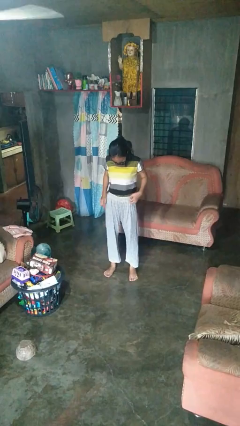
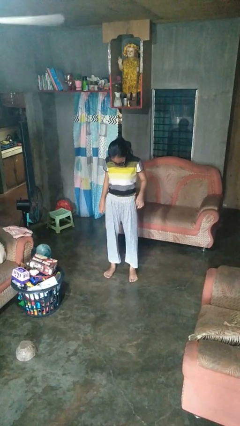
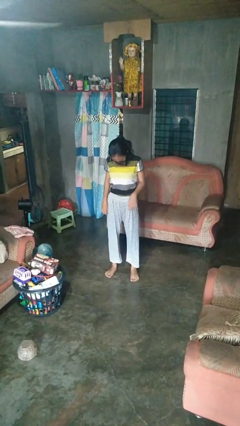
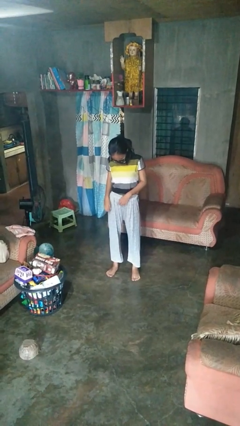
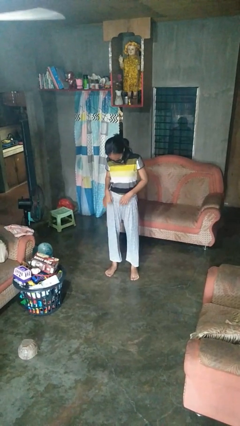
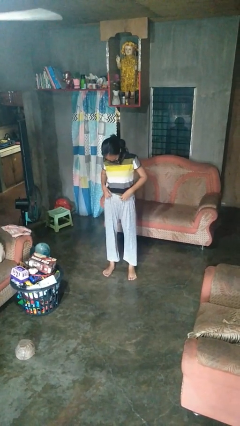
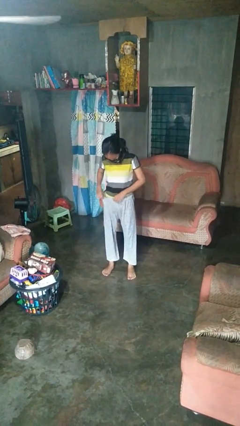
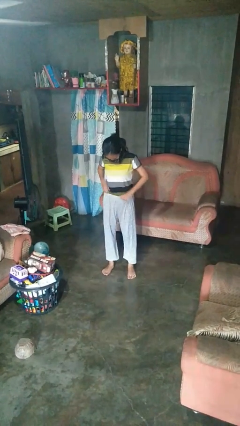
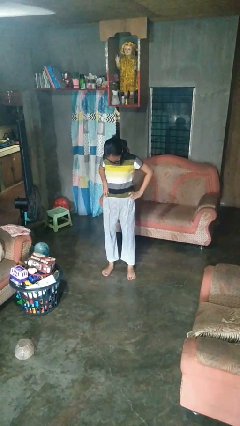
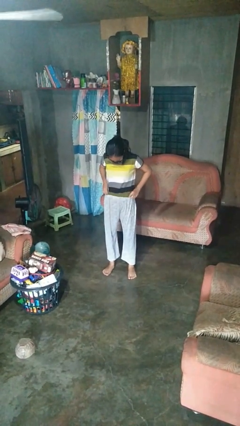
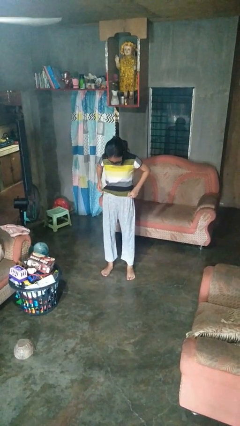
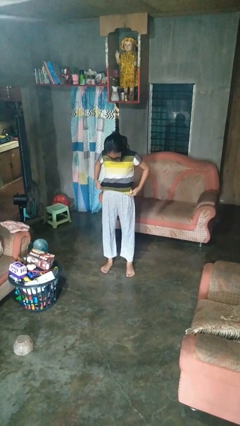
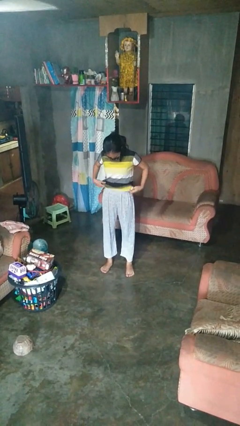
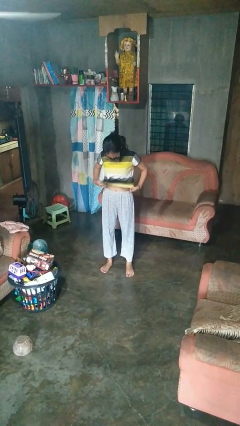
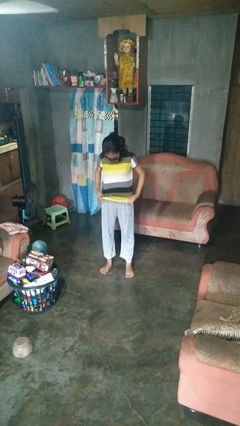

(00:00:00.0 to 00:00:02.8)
person untucks shirt

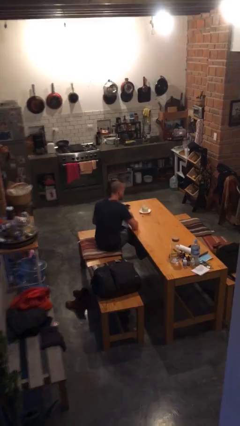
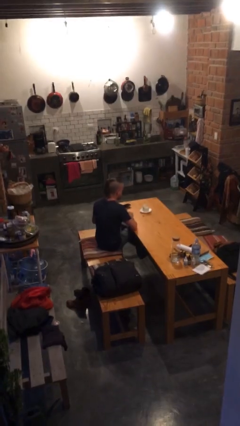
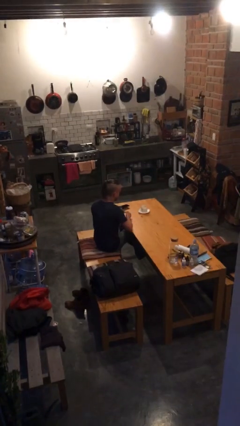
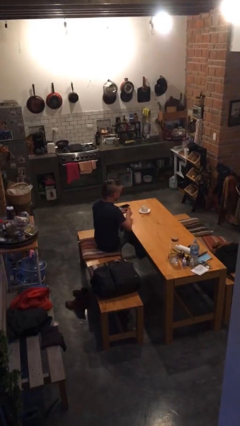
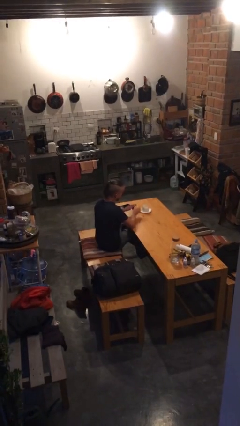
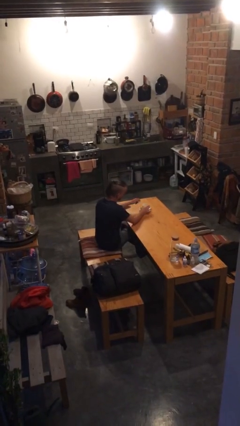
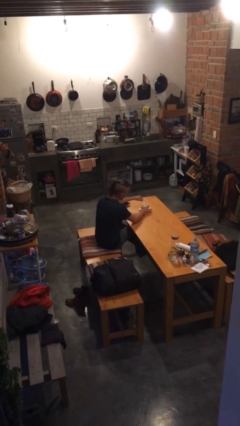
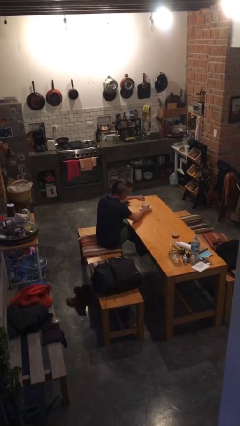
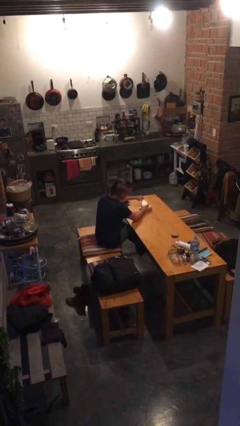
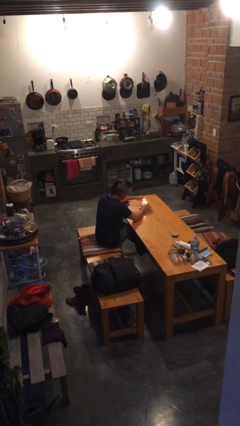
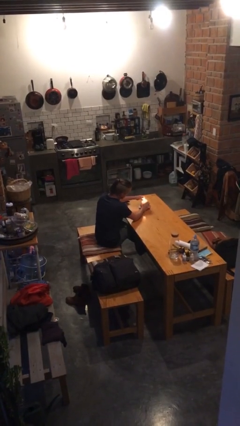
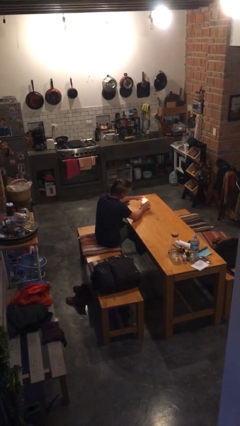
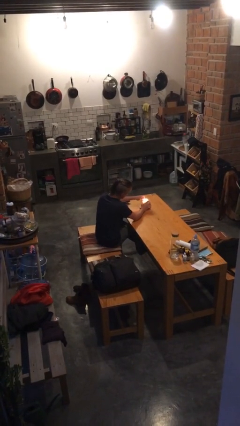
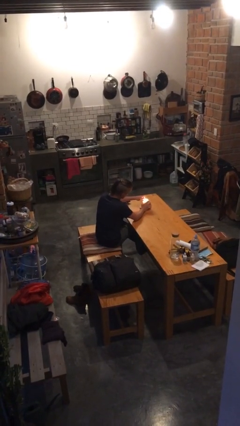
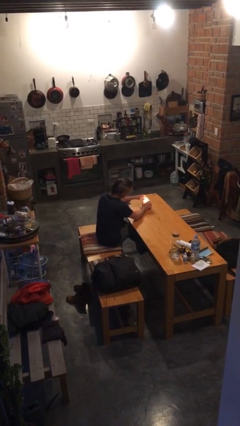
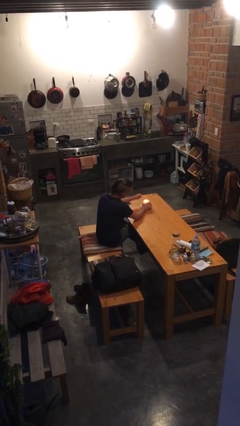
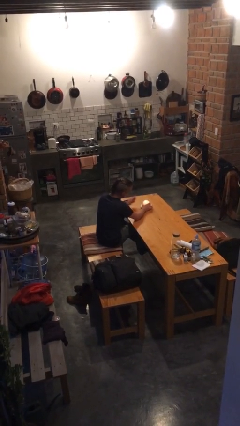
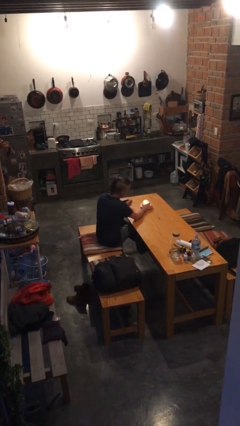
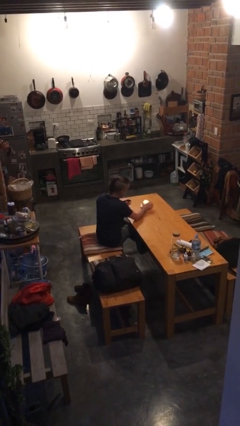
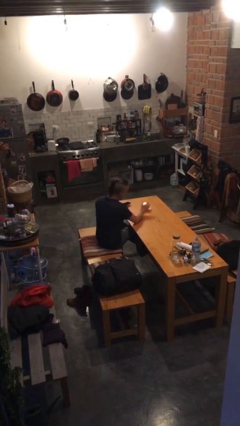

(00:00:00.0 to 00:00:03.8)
person lights candle

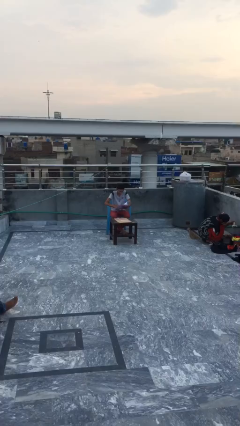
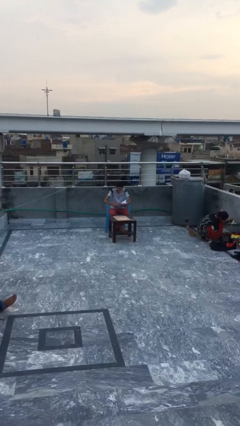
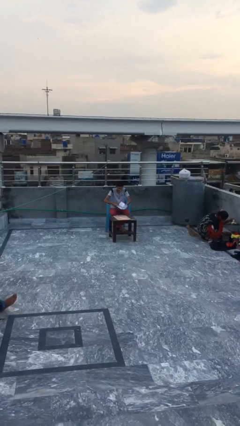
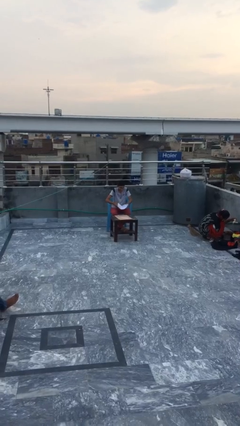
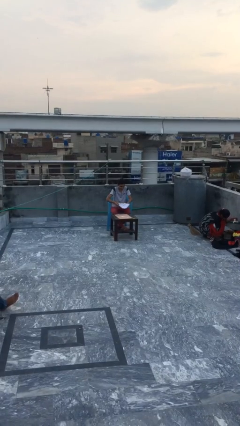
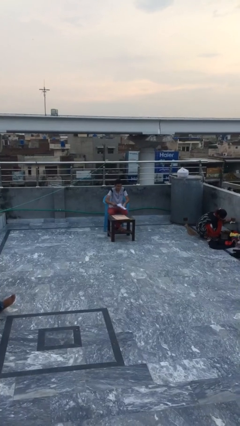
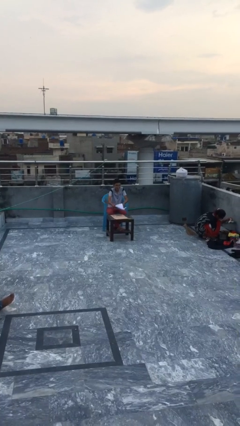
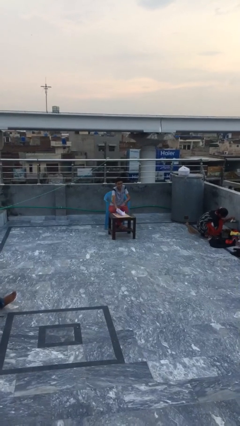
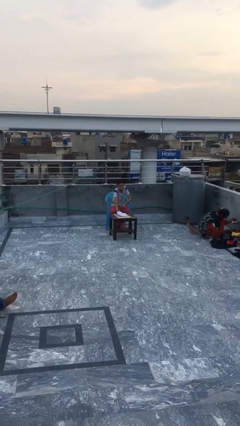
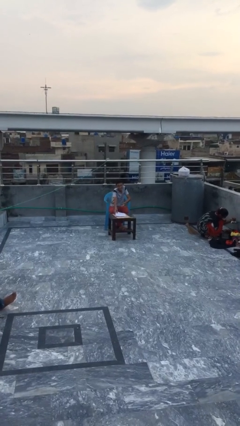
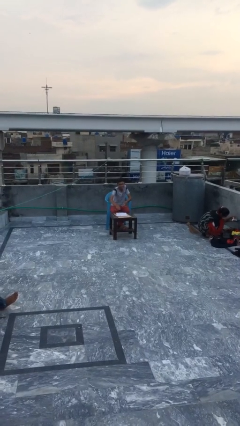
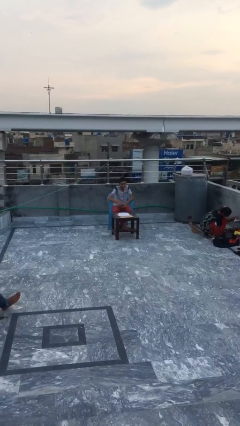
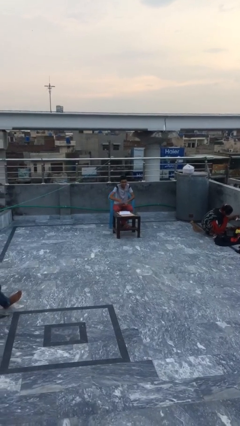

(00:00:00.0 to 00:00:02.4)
person puts down object on table

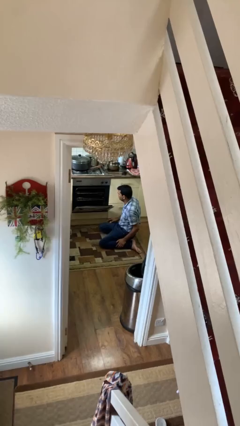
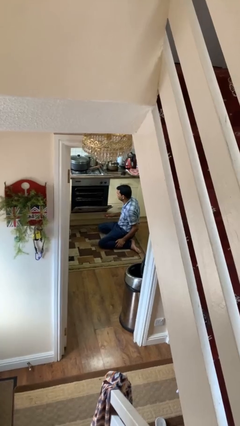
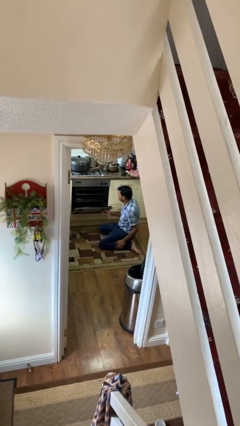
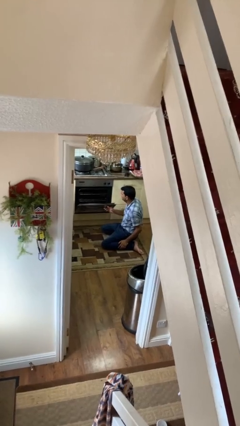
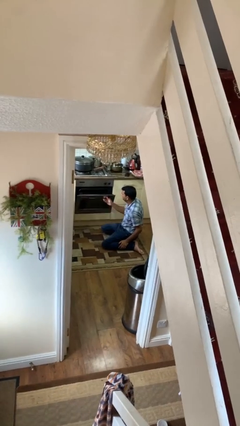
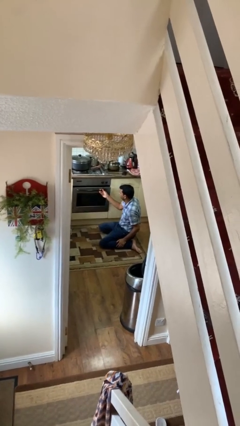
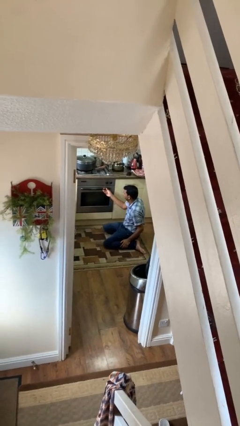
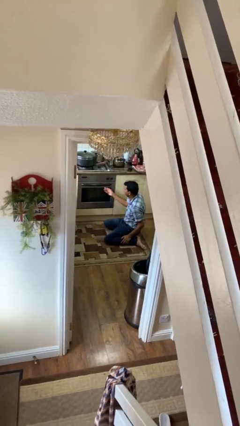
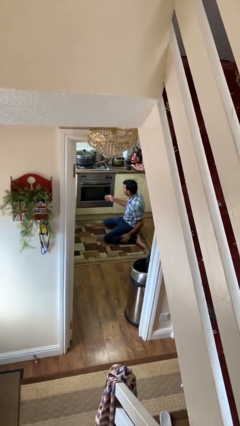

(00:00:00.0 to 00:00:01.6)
person closes oven door

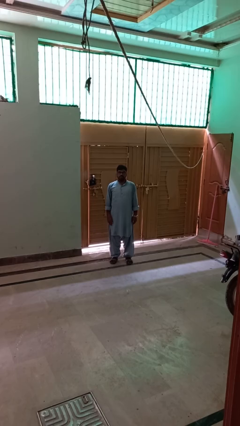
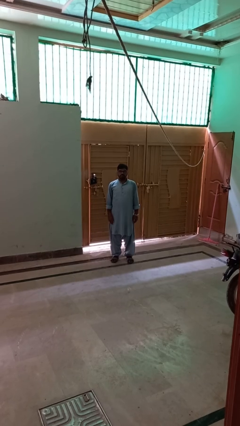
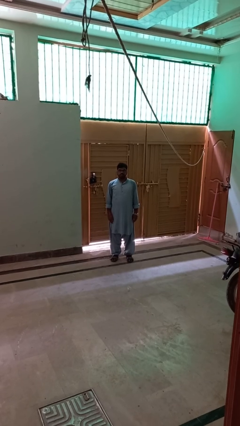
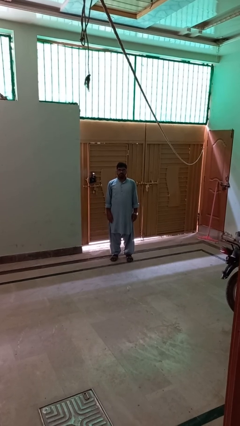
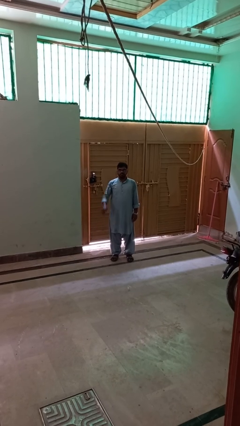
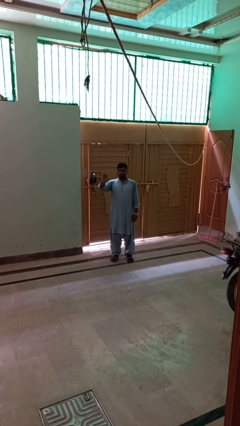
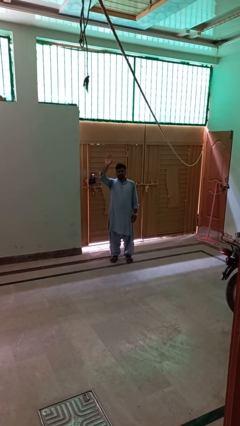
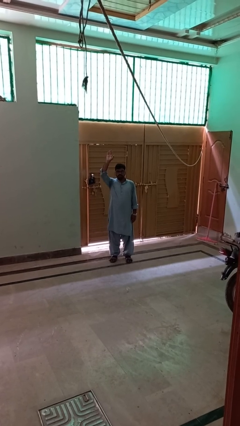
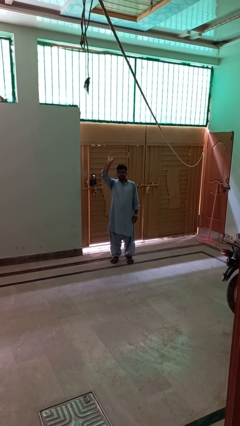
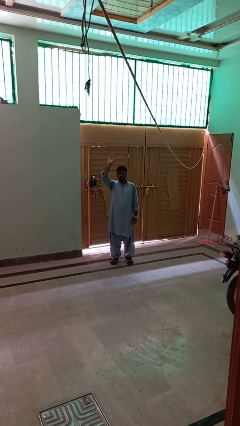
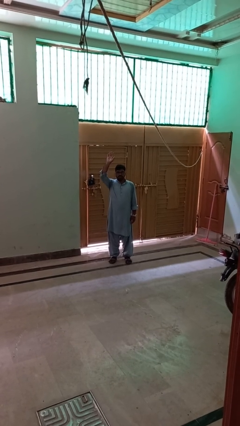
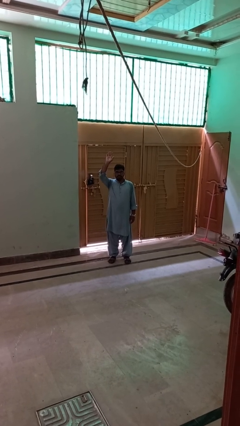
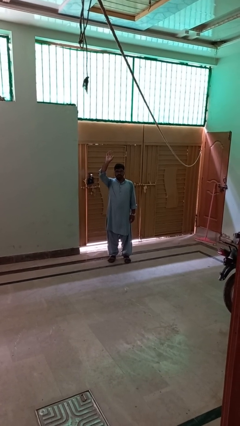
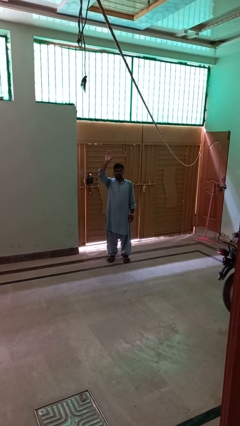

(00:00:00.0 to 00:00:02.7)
person gestures raise hand

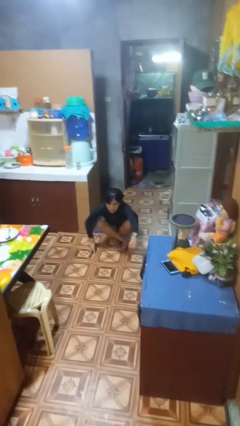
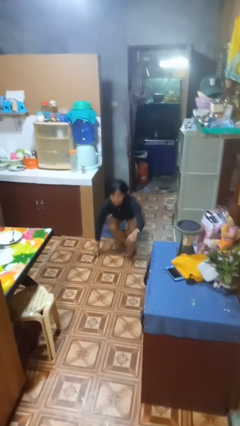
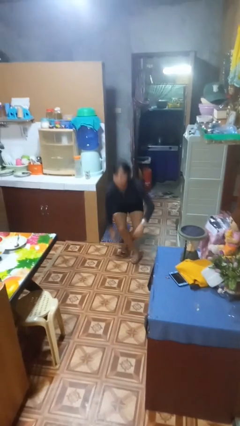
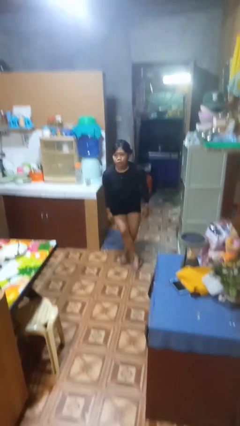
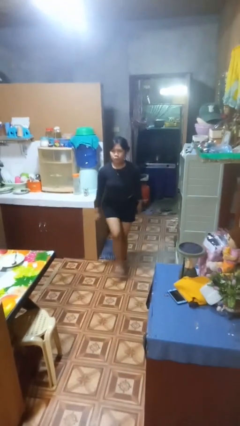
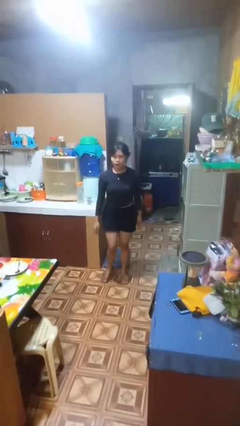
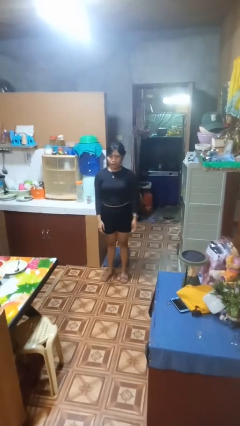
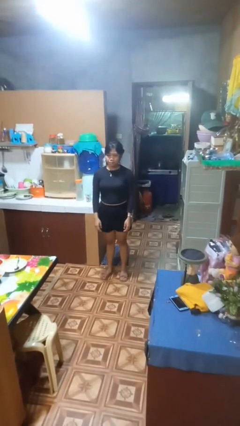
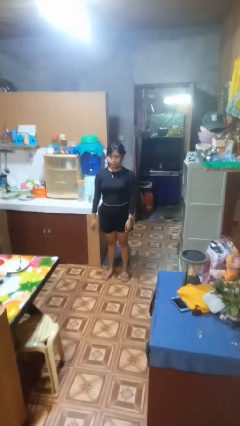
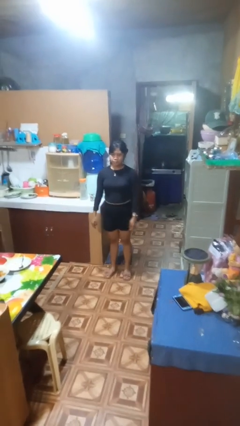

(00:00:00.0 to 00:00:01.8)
person stands up from floor

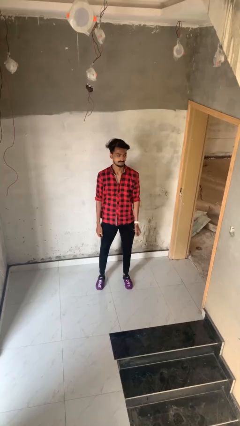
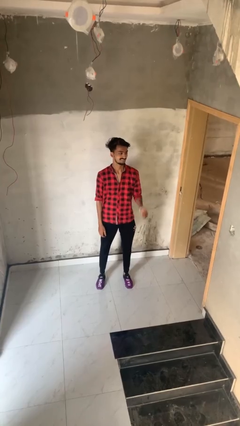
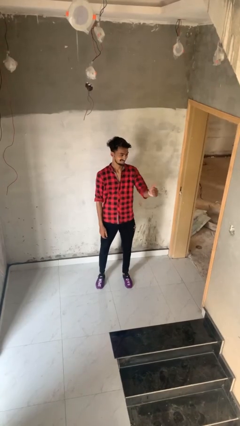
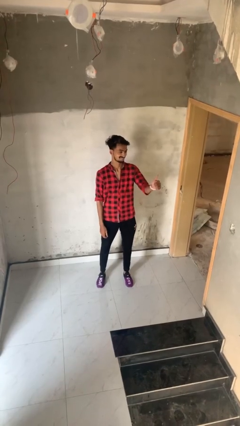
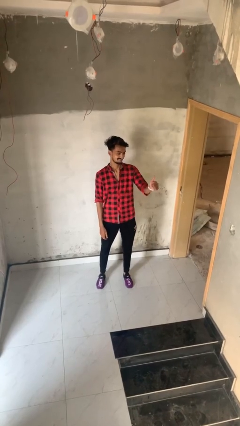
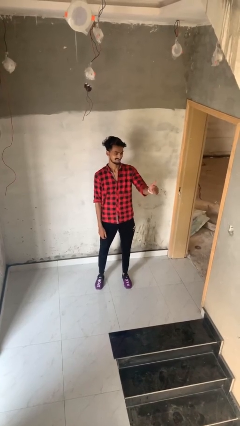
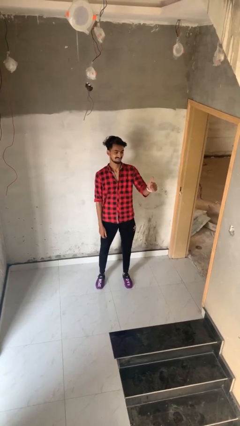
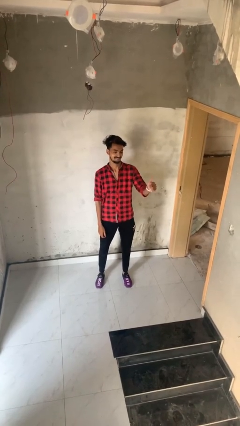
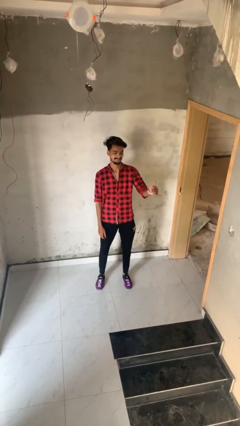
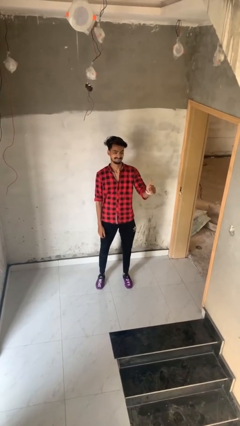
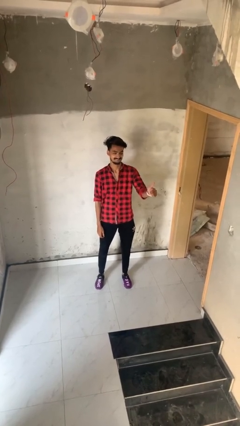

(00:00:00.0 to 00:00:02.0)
person gestures thumbs up
